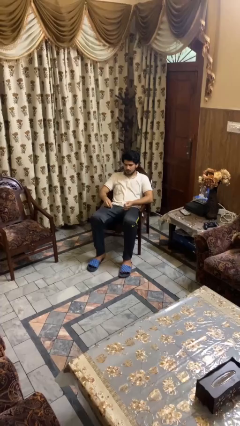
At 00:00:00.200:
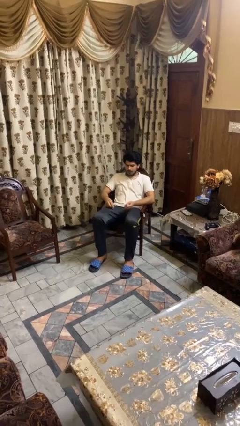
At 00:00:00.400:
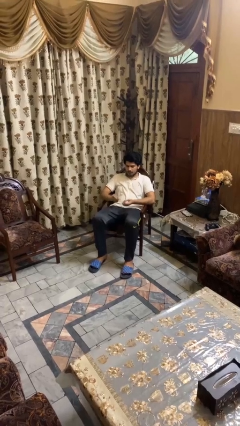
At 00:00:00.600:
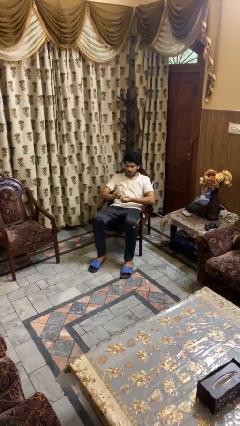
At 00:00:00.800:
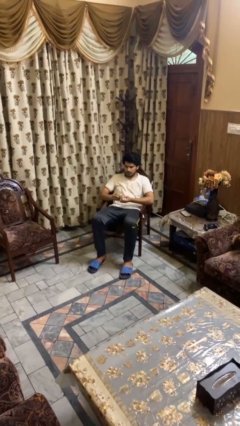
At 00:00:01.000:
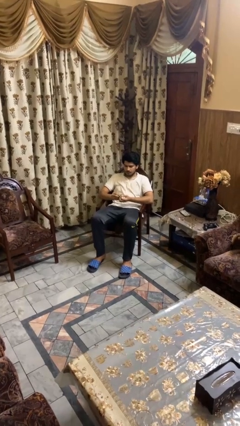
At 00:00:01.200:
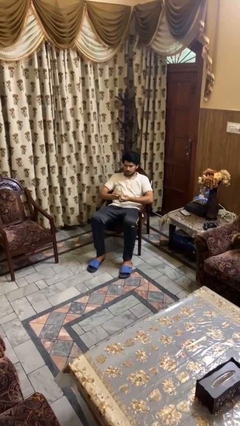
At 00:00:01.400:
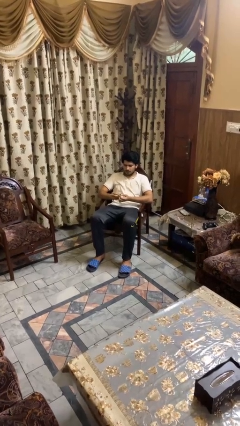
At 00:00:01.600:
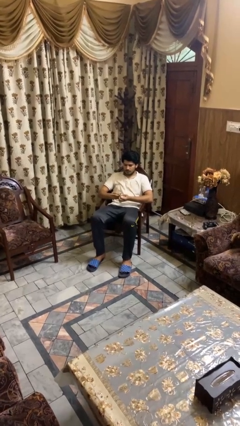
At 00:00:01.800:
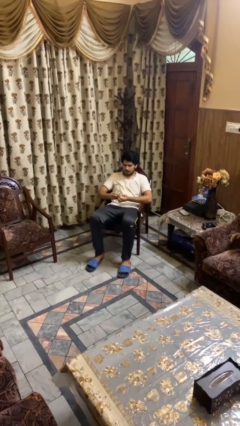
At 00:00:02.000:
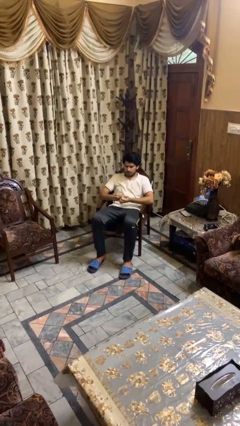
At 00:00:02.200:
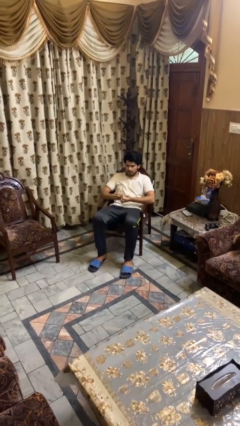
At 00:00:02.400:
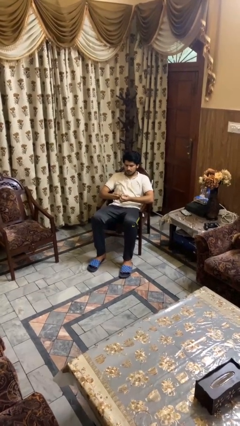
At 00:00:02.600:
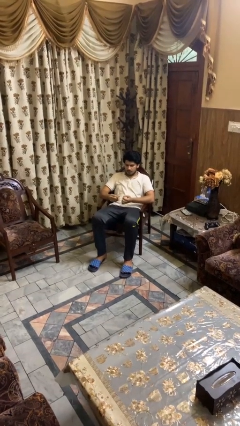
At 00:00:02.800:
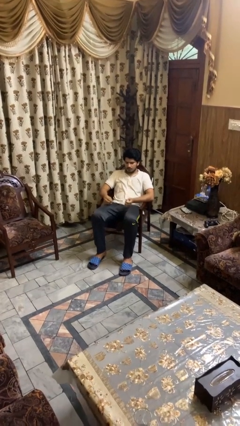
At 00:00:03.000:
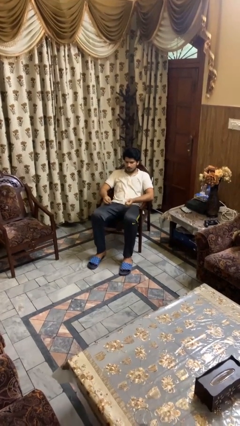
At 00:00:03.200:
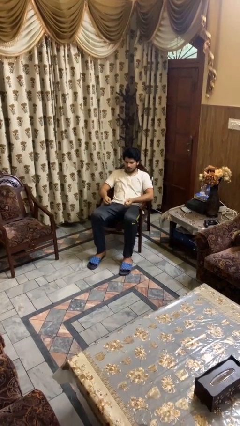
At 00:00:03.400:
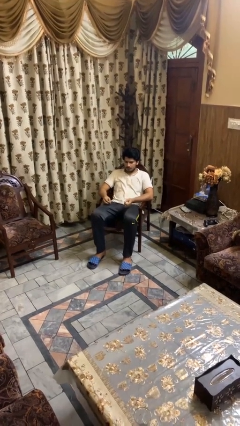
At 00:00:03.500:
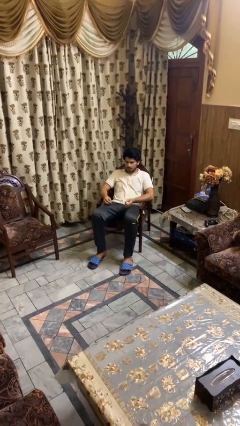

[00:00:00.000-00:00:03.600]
person files fingernails

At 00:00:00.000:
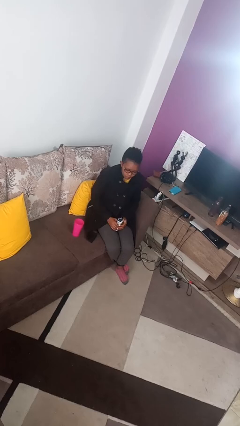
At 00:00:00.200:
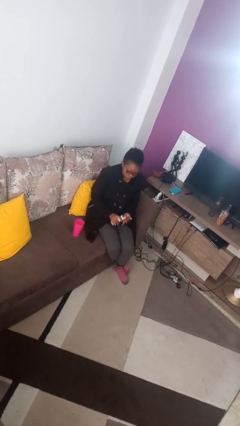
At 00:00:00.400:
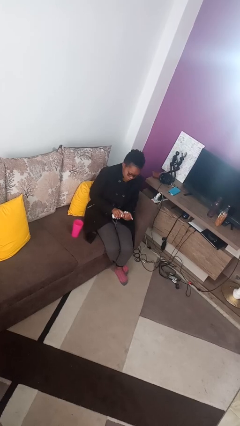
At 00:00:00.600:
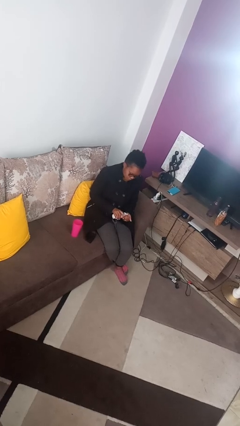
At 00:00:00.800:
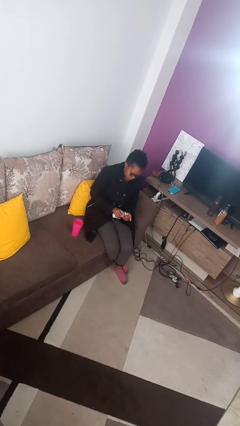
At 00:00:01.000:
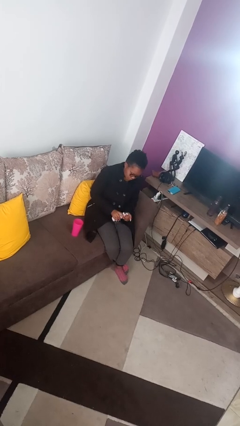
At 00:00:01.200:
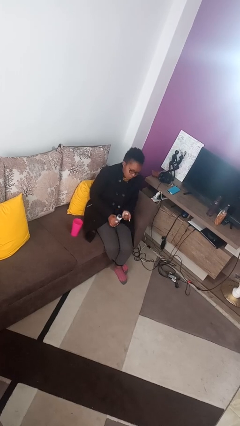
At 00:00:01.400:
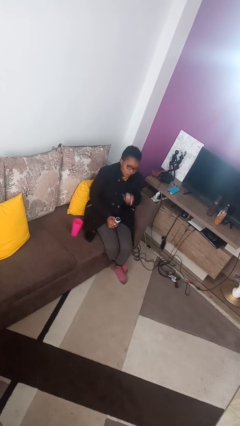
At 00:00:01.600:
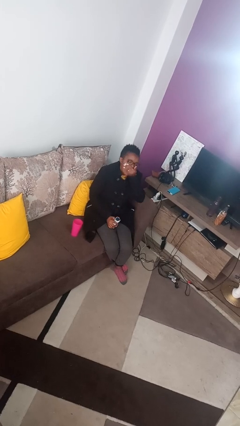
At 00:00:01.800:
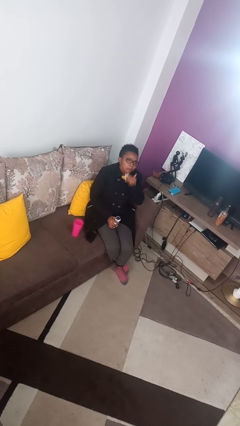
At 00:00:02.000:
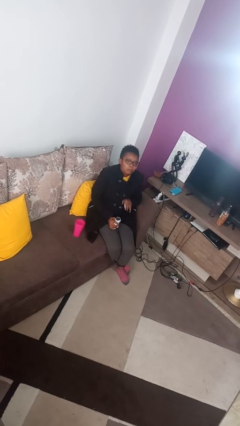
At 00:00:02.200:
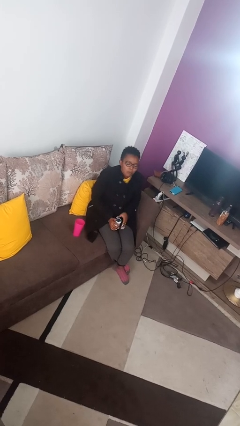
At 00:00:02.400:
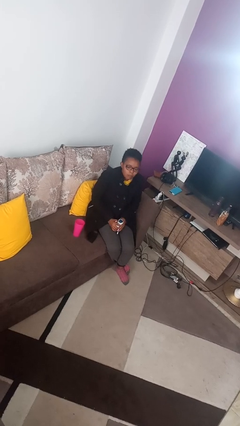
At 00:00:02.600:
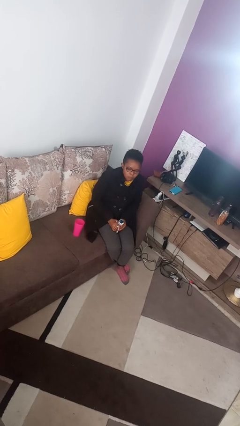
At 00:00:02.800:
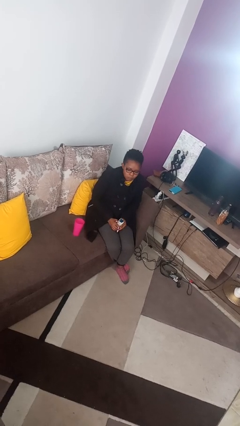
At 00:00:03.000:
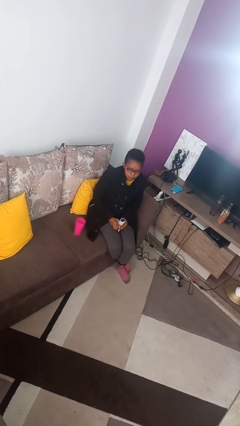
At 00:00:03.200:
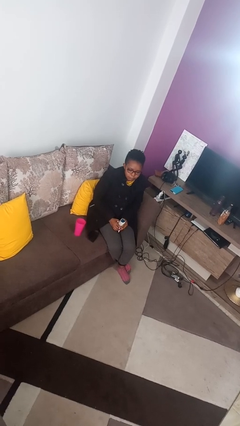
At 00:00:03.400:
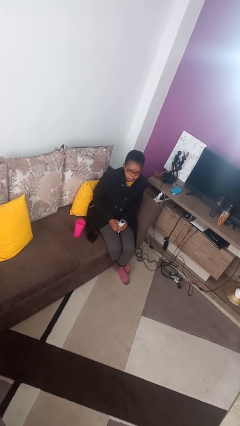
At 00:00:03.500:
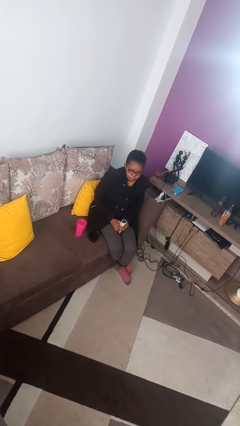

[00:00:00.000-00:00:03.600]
person takes medicine pills

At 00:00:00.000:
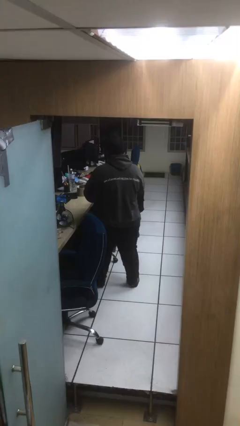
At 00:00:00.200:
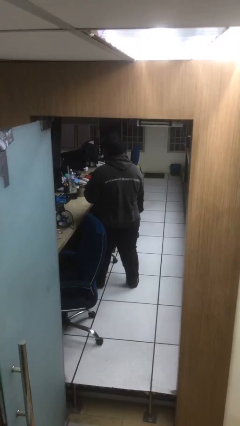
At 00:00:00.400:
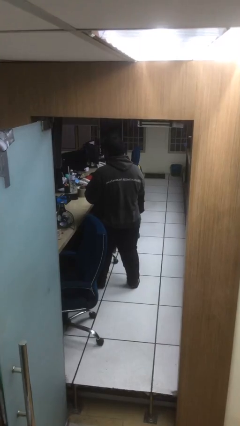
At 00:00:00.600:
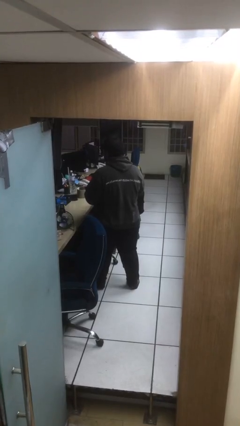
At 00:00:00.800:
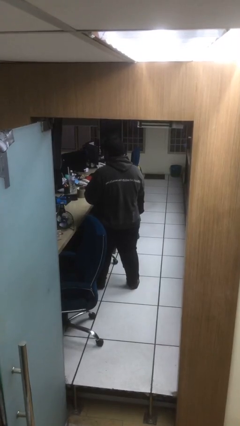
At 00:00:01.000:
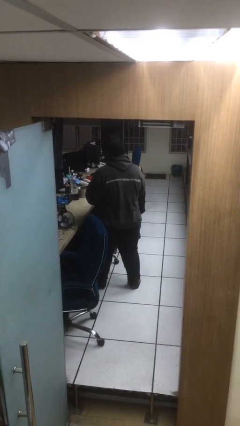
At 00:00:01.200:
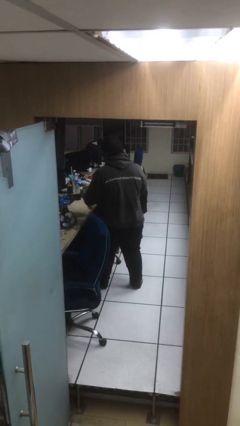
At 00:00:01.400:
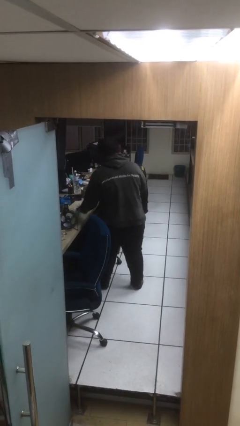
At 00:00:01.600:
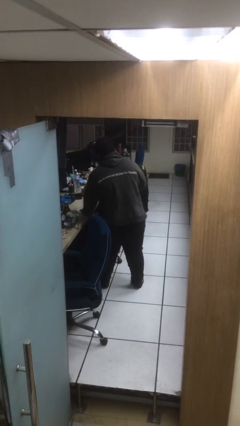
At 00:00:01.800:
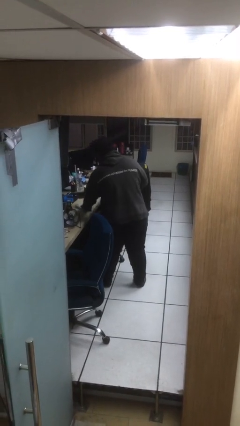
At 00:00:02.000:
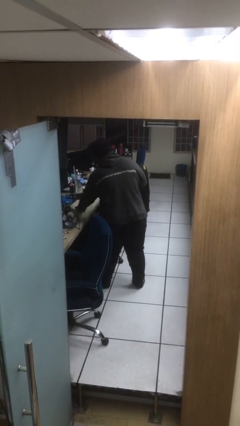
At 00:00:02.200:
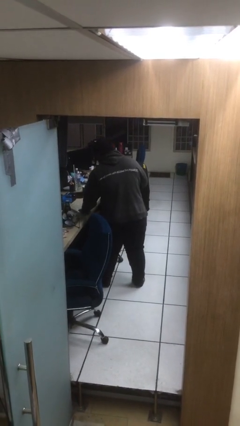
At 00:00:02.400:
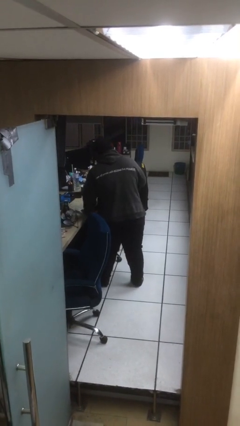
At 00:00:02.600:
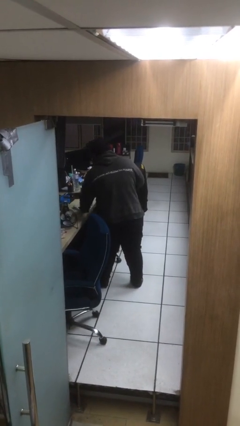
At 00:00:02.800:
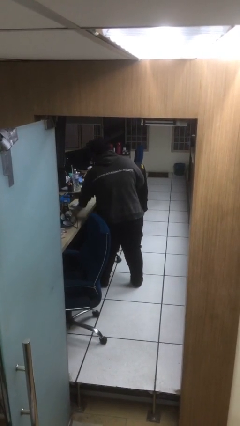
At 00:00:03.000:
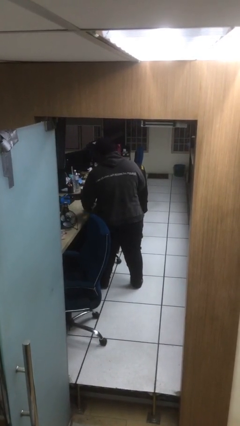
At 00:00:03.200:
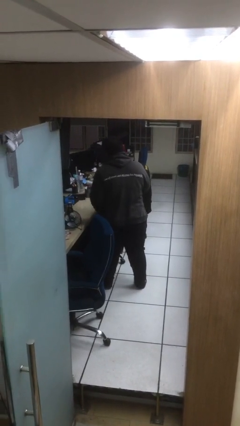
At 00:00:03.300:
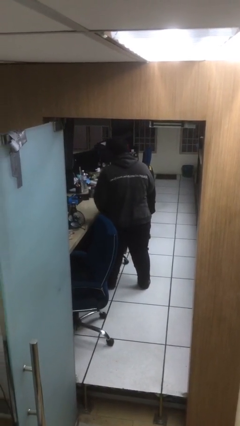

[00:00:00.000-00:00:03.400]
person cleans table with rag

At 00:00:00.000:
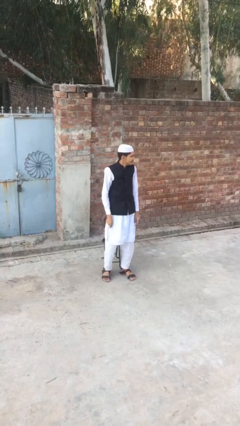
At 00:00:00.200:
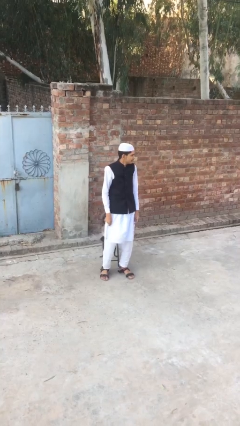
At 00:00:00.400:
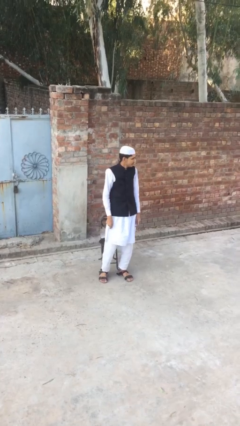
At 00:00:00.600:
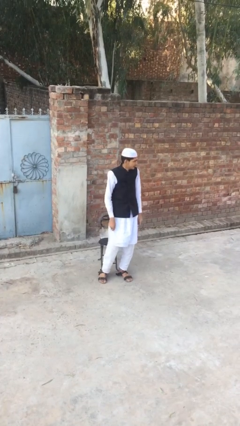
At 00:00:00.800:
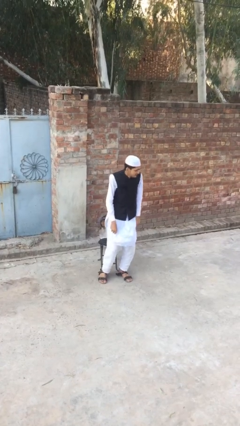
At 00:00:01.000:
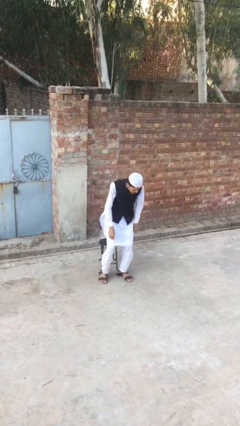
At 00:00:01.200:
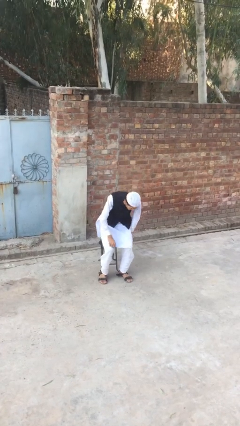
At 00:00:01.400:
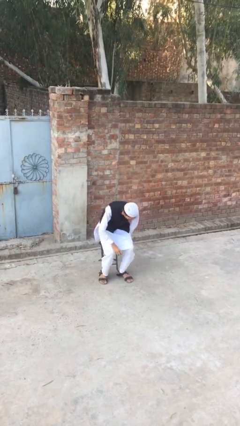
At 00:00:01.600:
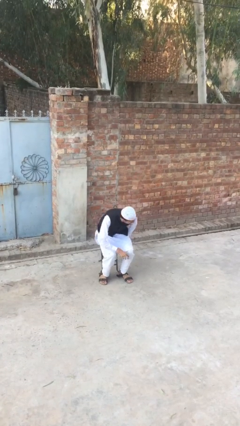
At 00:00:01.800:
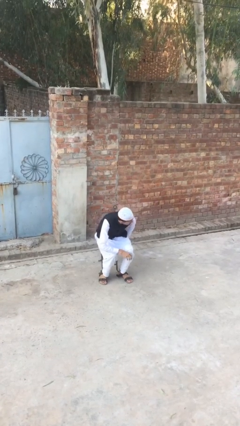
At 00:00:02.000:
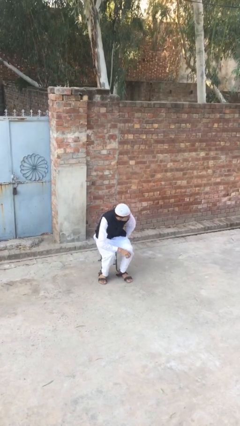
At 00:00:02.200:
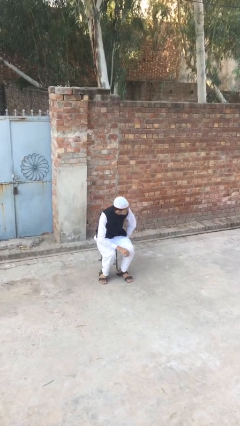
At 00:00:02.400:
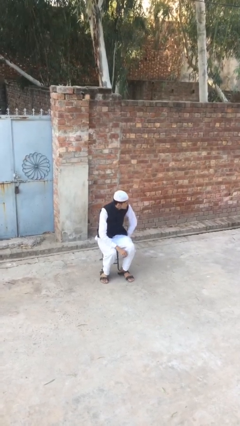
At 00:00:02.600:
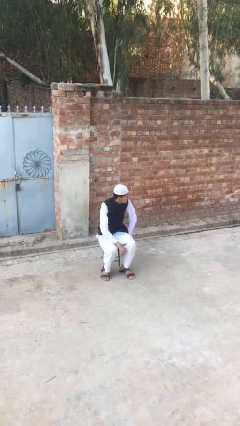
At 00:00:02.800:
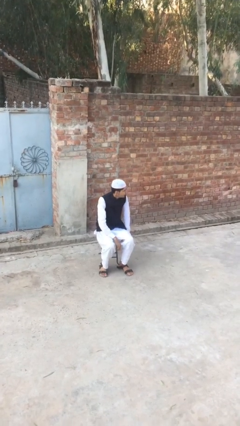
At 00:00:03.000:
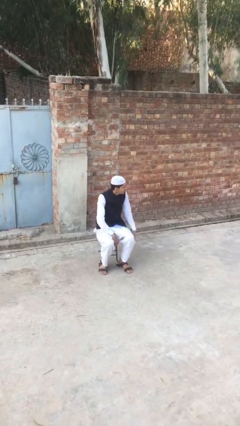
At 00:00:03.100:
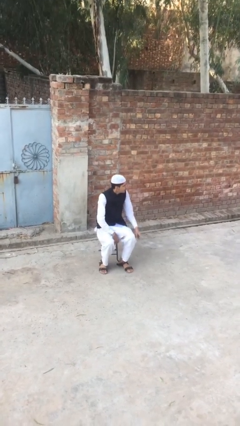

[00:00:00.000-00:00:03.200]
person sits down

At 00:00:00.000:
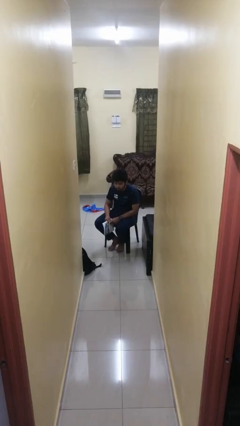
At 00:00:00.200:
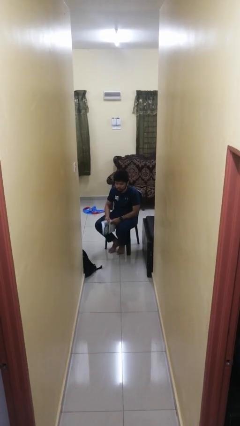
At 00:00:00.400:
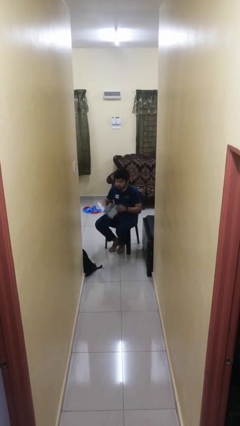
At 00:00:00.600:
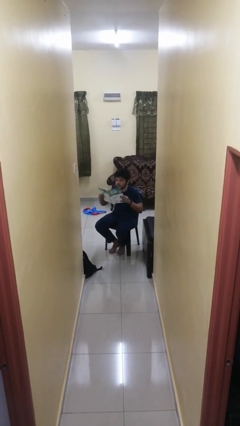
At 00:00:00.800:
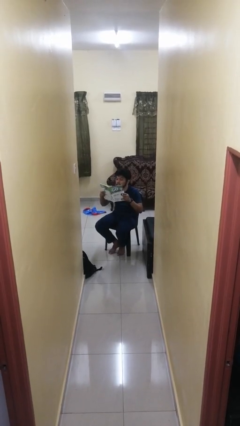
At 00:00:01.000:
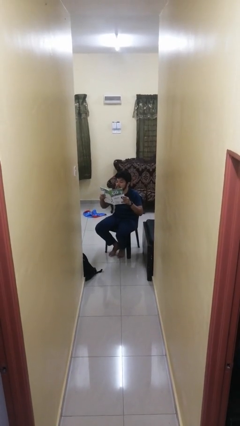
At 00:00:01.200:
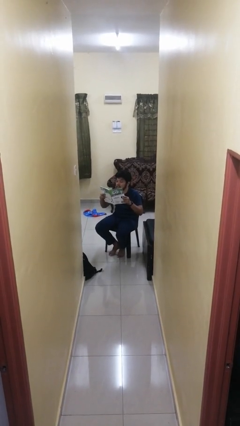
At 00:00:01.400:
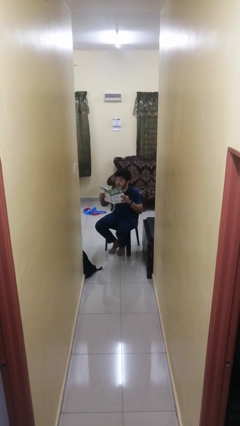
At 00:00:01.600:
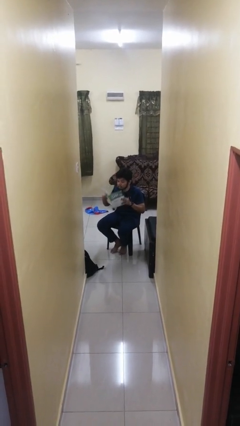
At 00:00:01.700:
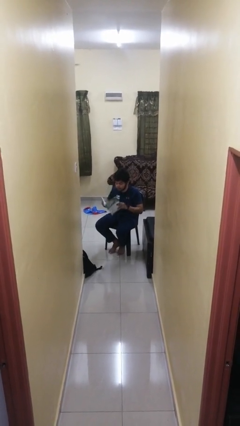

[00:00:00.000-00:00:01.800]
person reads magazine

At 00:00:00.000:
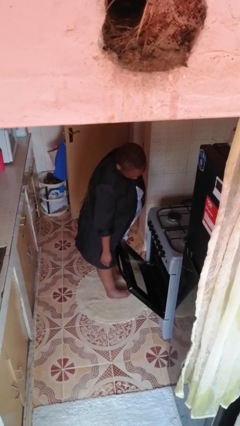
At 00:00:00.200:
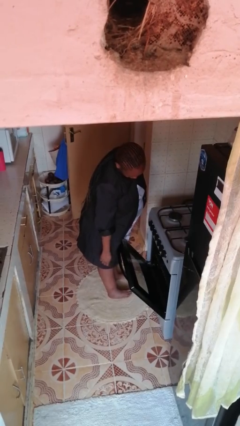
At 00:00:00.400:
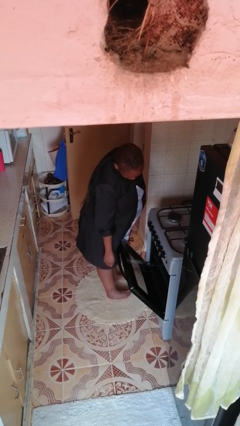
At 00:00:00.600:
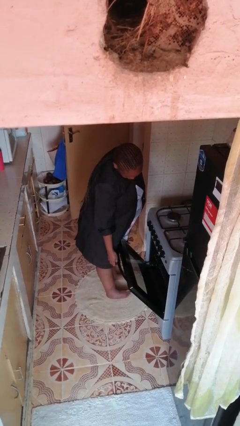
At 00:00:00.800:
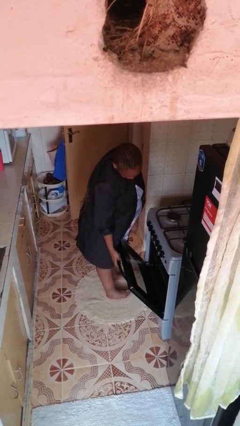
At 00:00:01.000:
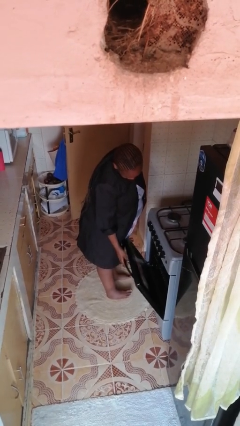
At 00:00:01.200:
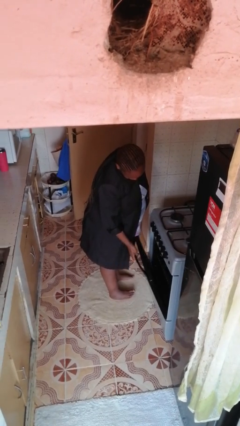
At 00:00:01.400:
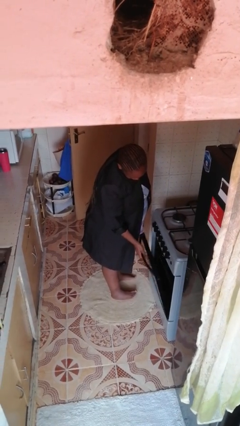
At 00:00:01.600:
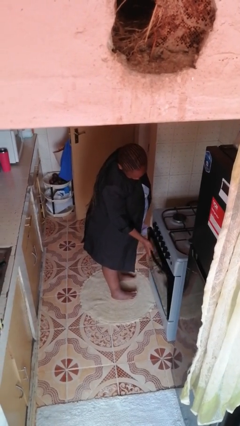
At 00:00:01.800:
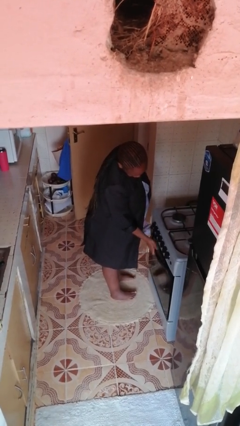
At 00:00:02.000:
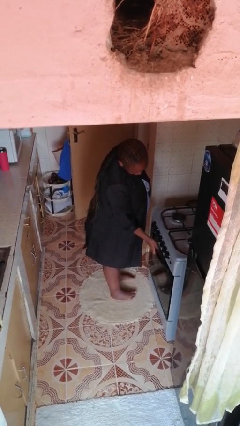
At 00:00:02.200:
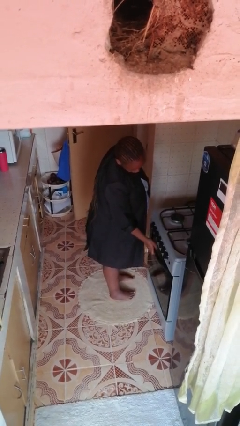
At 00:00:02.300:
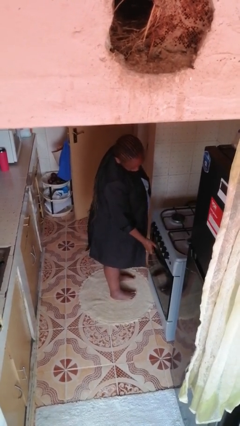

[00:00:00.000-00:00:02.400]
person closes oven door
